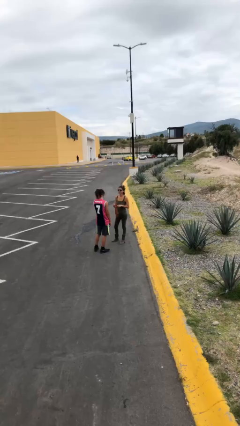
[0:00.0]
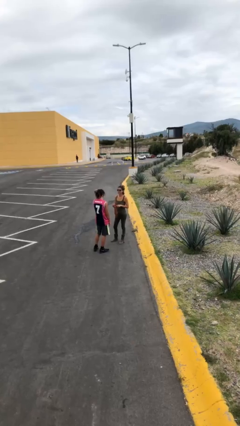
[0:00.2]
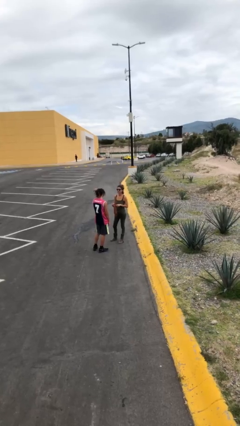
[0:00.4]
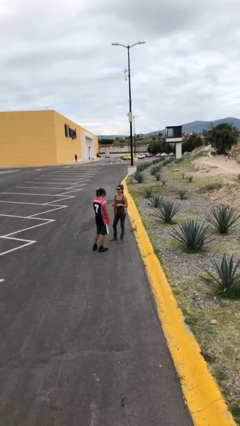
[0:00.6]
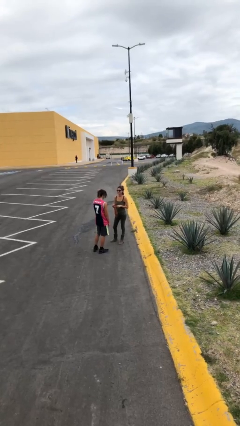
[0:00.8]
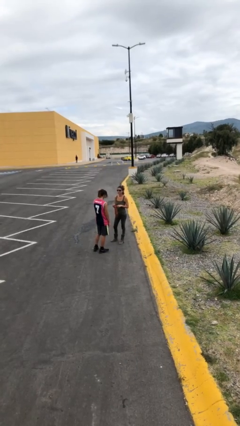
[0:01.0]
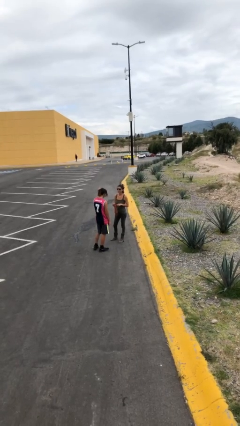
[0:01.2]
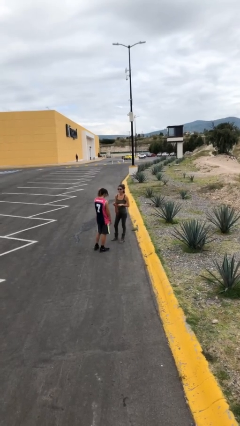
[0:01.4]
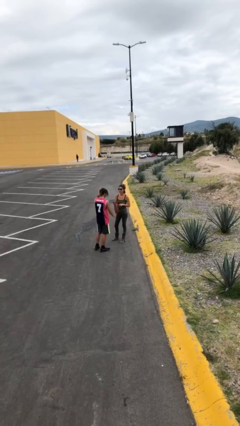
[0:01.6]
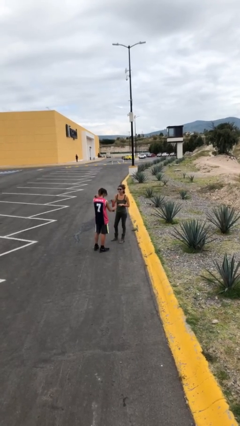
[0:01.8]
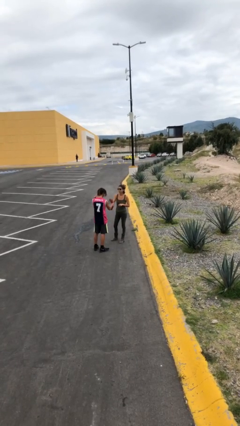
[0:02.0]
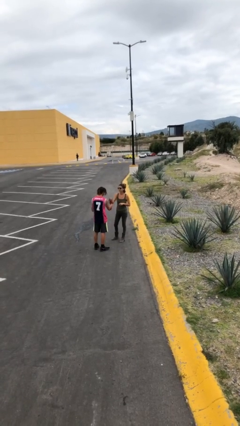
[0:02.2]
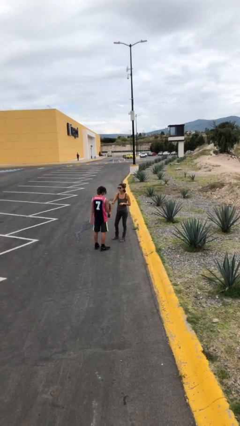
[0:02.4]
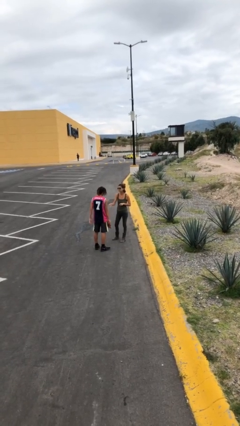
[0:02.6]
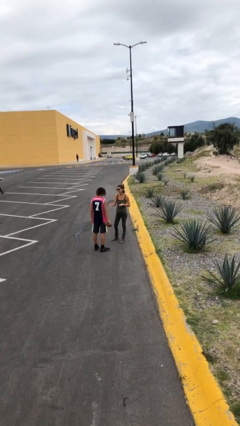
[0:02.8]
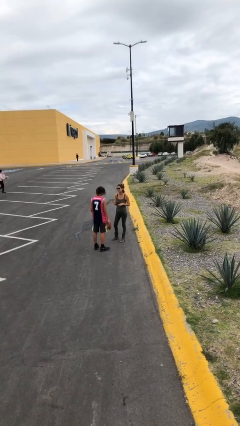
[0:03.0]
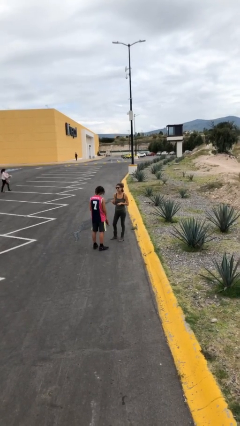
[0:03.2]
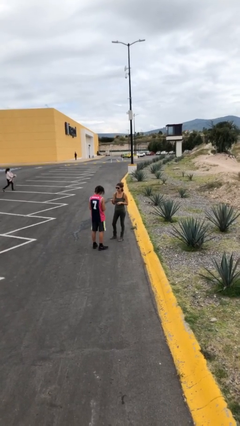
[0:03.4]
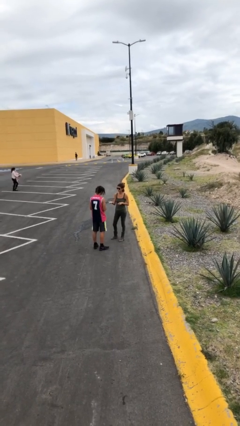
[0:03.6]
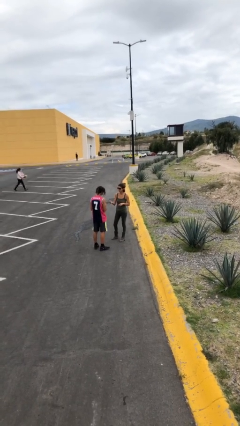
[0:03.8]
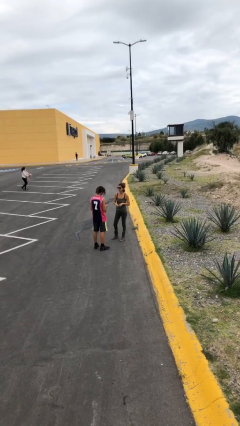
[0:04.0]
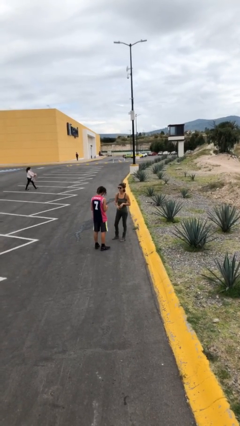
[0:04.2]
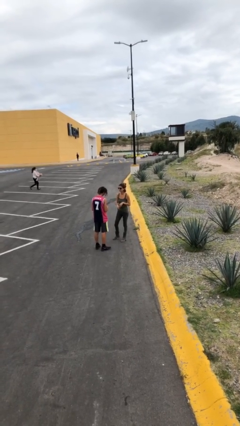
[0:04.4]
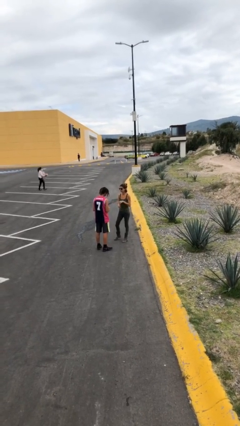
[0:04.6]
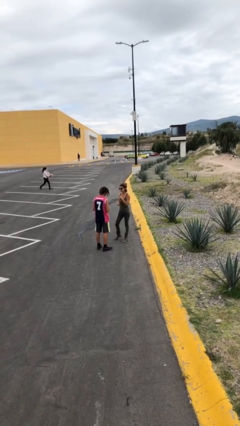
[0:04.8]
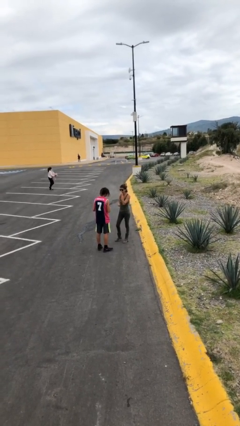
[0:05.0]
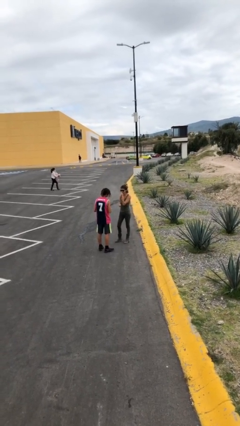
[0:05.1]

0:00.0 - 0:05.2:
person transfers object to person

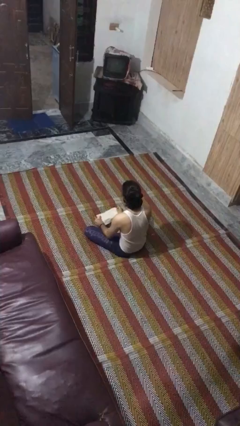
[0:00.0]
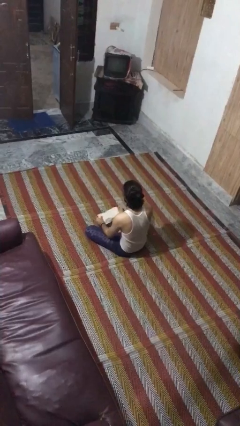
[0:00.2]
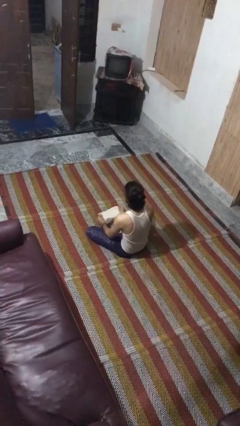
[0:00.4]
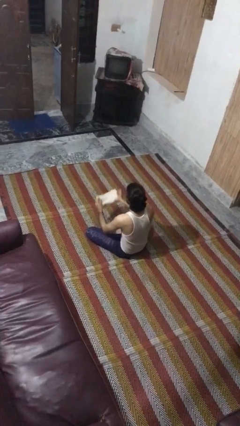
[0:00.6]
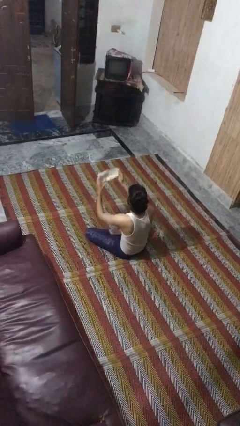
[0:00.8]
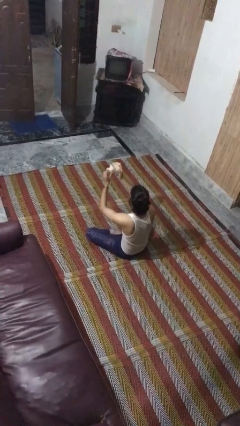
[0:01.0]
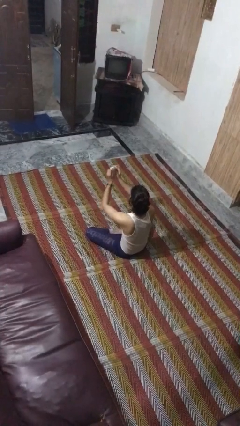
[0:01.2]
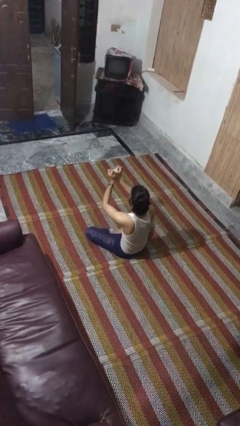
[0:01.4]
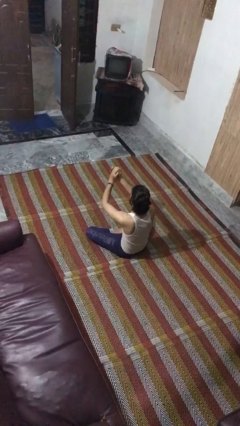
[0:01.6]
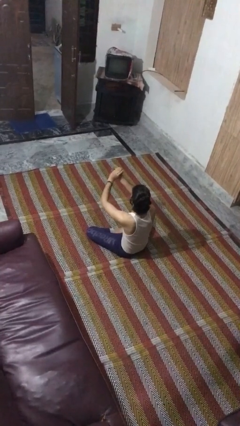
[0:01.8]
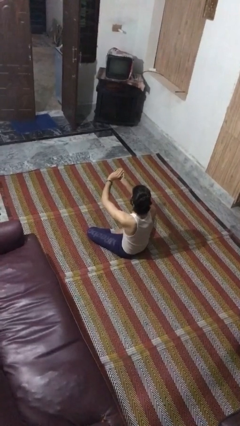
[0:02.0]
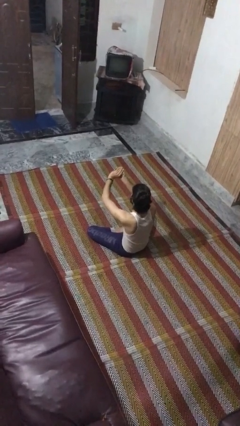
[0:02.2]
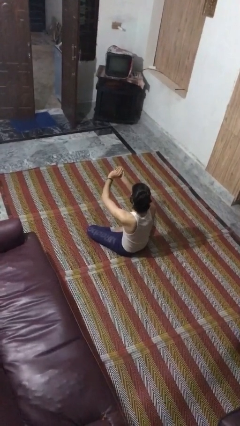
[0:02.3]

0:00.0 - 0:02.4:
person crumples paper

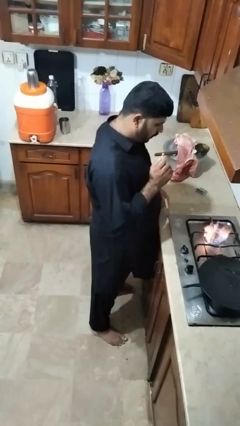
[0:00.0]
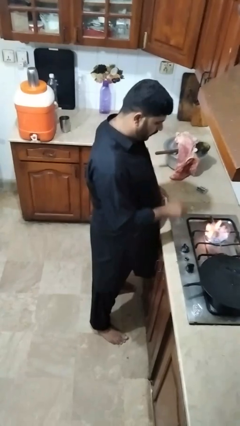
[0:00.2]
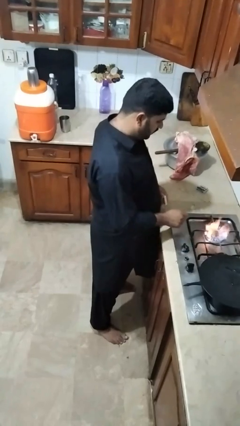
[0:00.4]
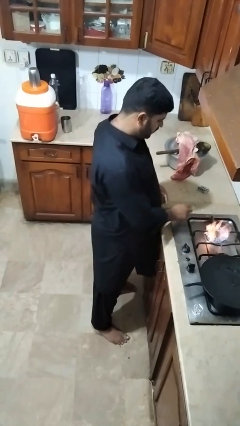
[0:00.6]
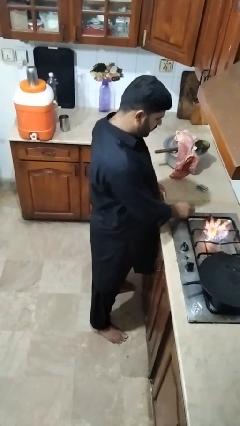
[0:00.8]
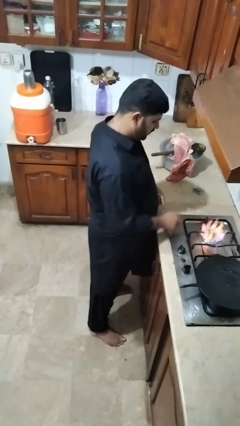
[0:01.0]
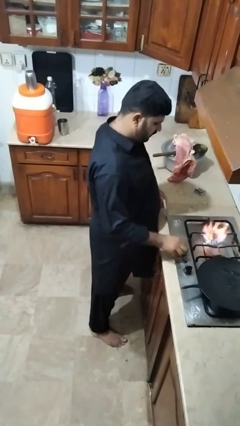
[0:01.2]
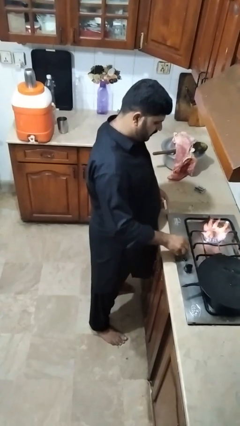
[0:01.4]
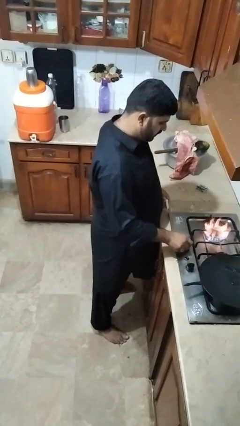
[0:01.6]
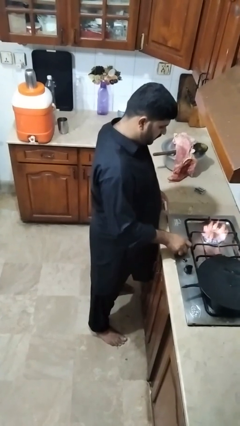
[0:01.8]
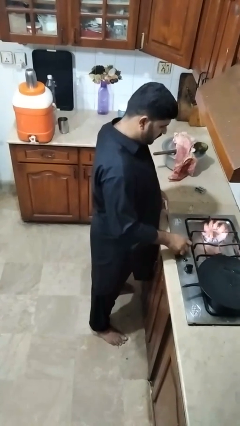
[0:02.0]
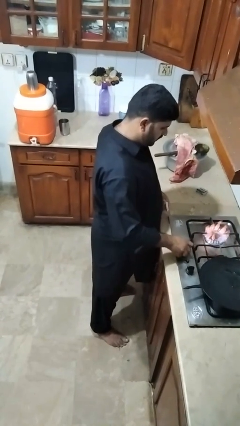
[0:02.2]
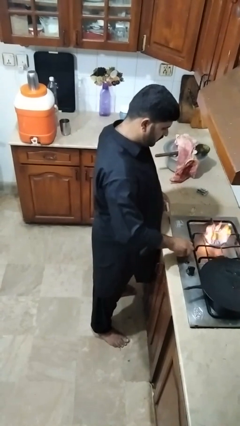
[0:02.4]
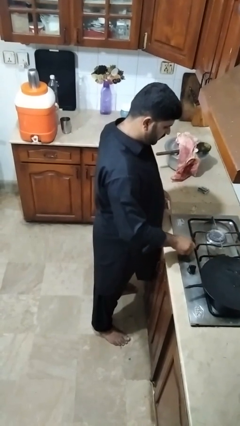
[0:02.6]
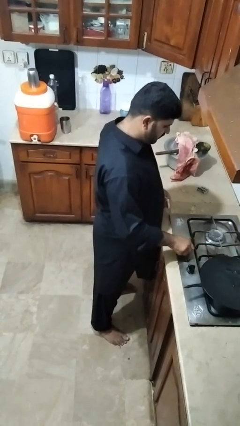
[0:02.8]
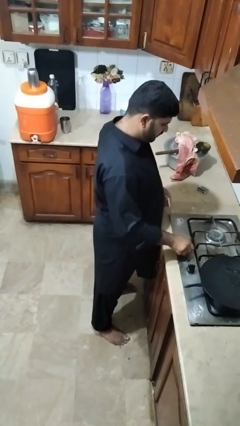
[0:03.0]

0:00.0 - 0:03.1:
person turns off stovetop

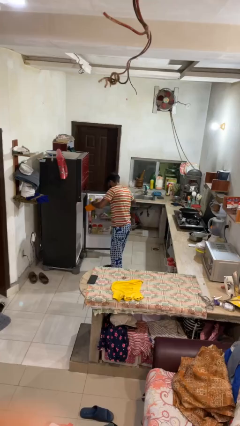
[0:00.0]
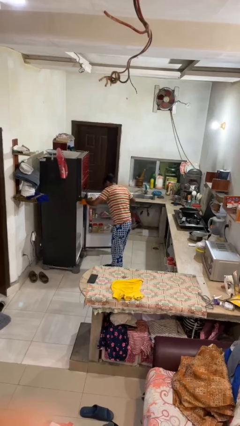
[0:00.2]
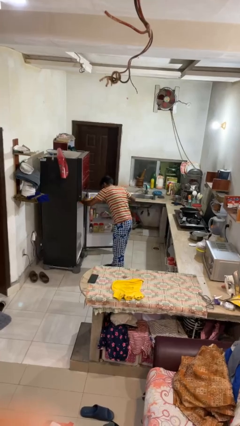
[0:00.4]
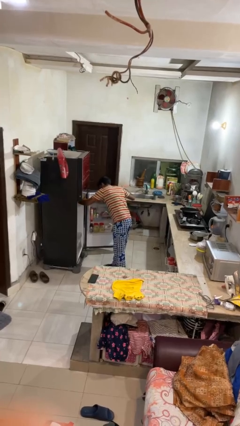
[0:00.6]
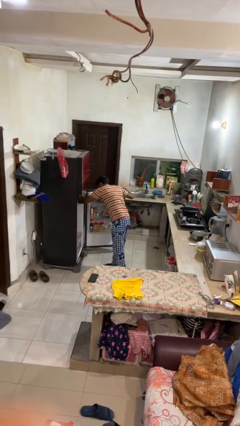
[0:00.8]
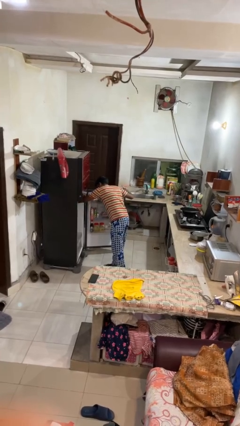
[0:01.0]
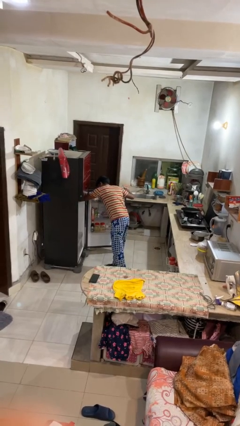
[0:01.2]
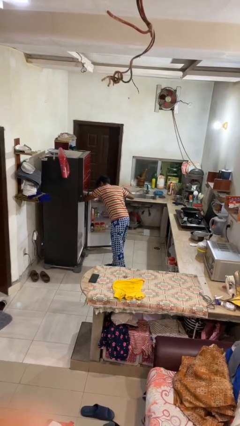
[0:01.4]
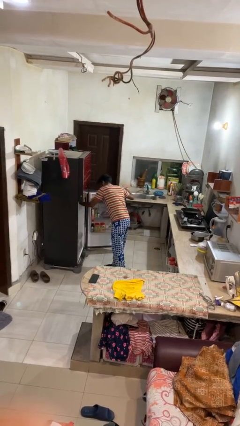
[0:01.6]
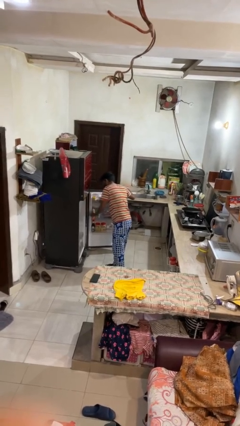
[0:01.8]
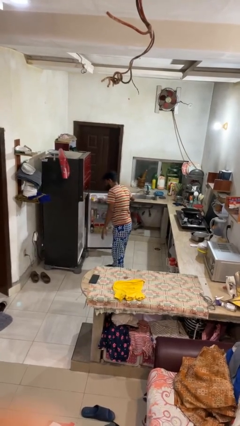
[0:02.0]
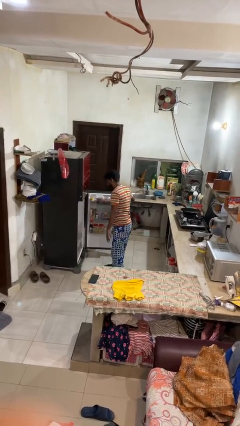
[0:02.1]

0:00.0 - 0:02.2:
person puts object into refrigerator

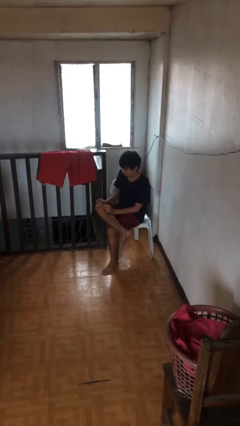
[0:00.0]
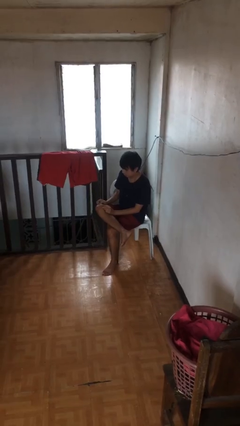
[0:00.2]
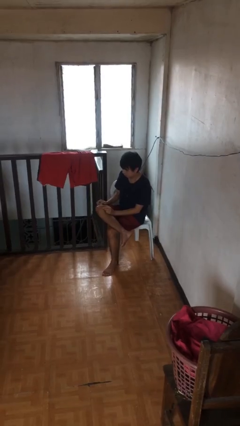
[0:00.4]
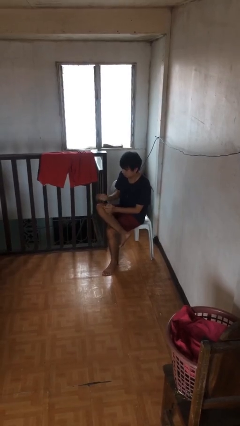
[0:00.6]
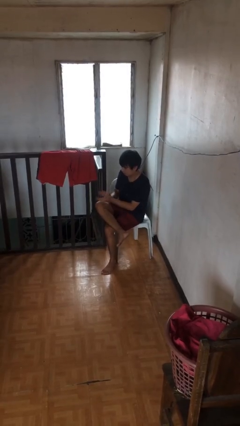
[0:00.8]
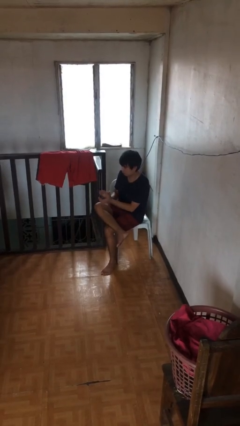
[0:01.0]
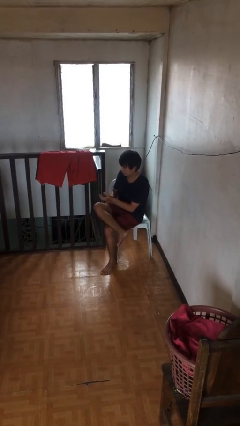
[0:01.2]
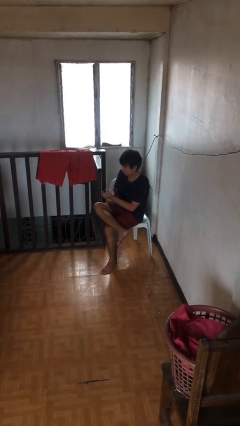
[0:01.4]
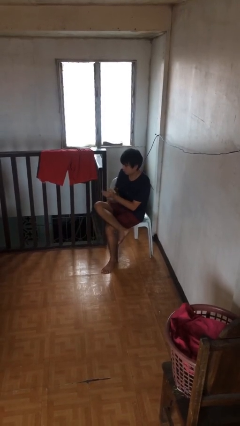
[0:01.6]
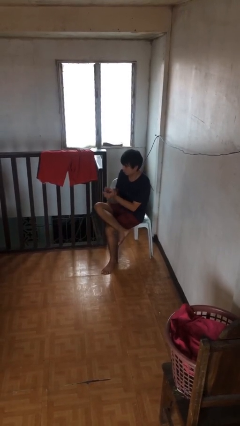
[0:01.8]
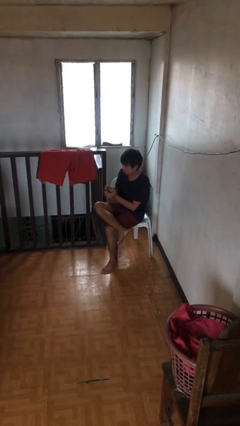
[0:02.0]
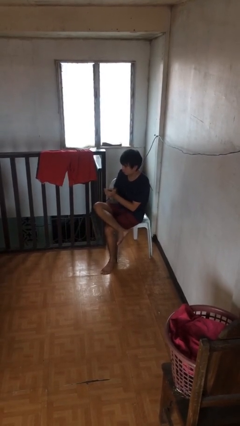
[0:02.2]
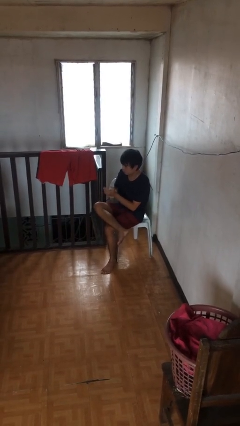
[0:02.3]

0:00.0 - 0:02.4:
person claps hands

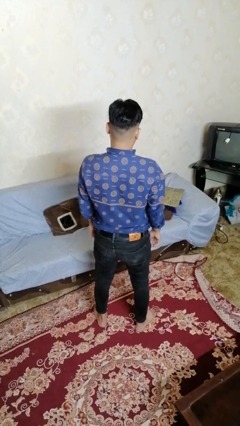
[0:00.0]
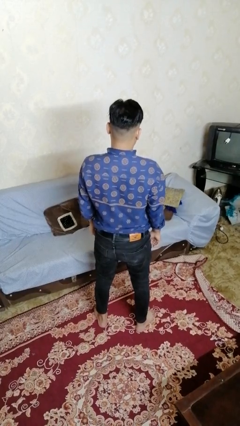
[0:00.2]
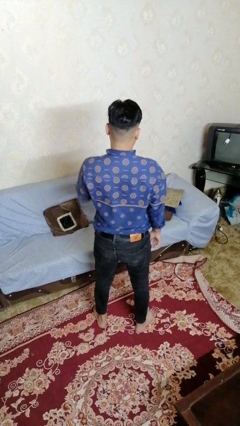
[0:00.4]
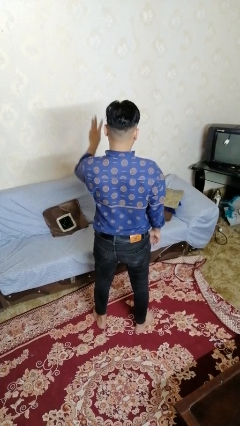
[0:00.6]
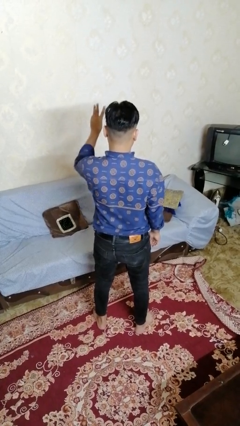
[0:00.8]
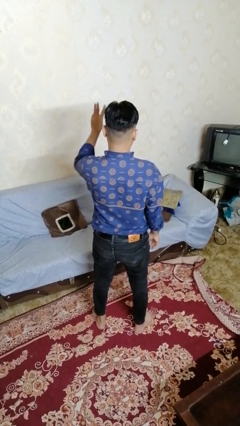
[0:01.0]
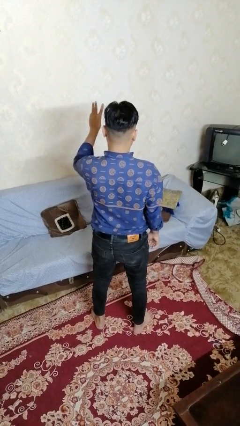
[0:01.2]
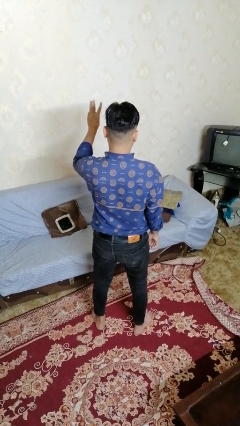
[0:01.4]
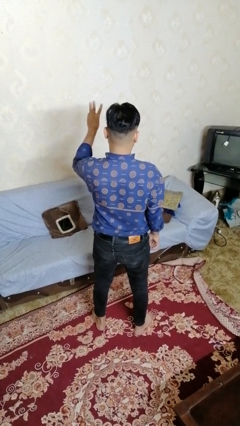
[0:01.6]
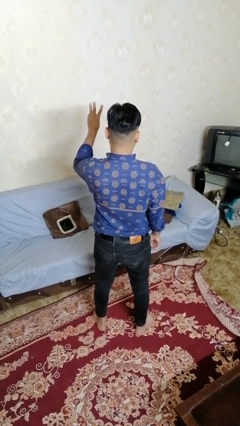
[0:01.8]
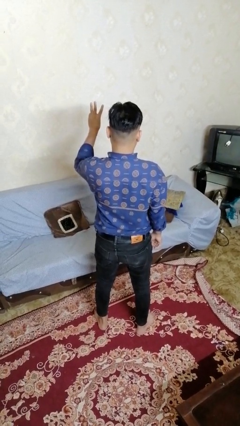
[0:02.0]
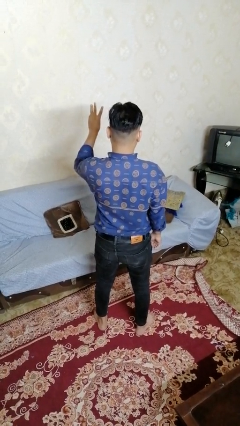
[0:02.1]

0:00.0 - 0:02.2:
person gestures number three

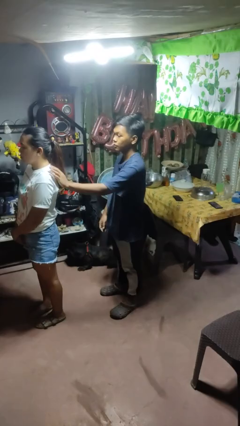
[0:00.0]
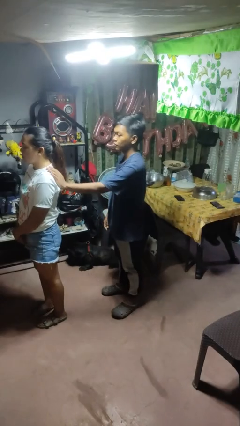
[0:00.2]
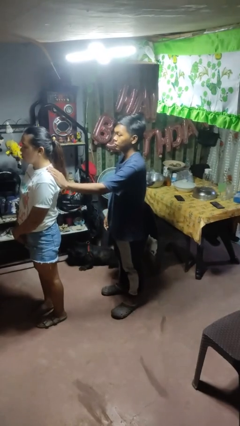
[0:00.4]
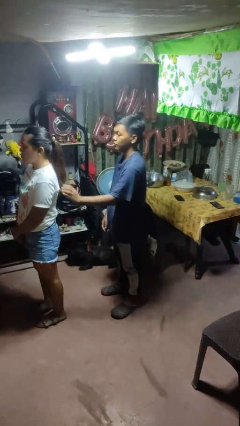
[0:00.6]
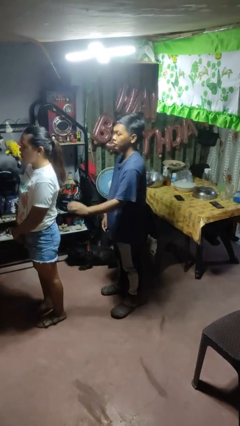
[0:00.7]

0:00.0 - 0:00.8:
person touches back of person
